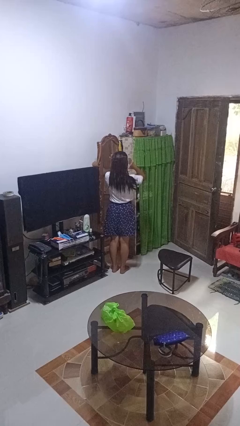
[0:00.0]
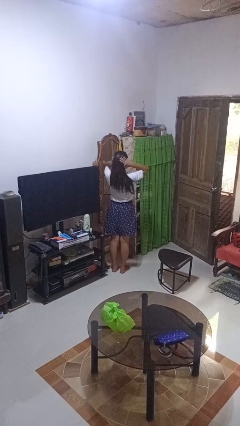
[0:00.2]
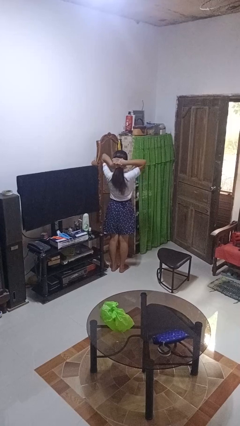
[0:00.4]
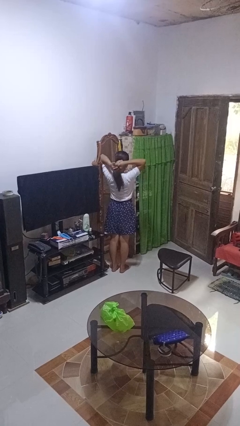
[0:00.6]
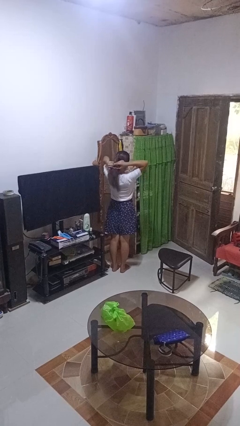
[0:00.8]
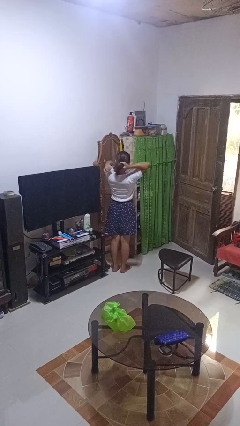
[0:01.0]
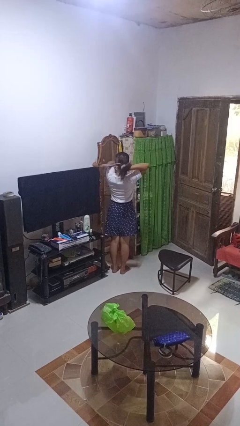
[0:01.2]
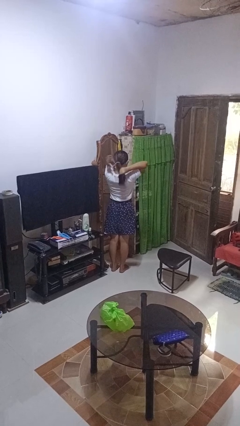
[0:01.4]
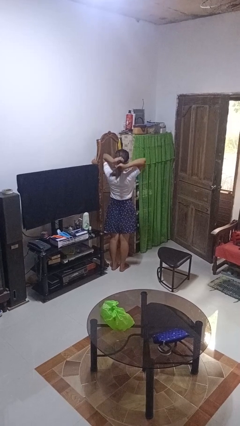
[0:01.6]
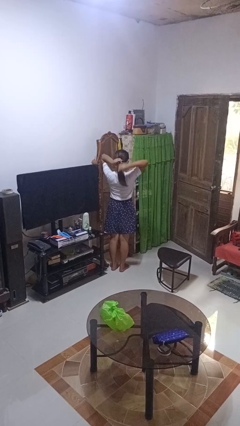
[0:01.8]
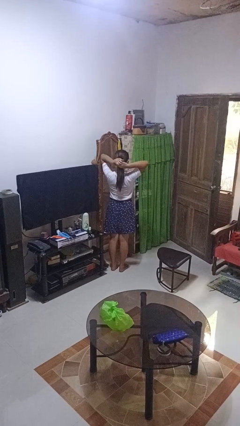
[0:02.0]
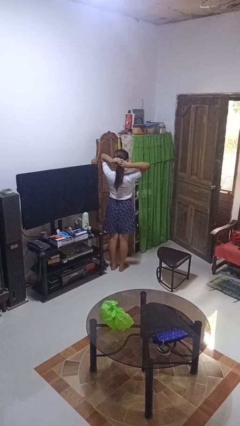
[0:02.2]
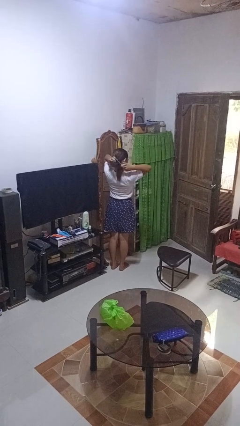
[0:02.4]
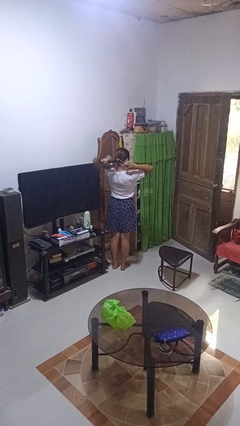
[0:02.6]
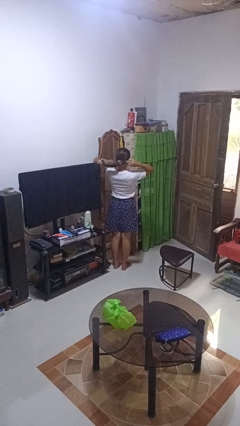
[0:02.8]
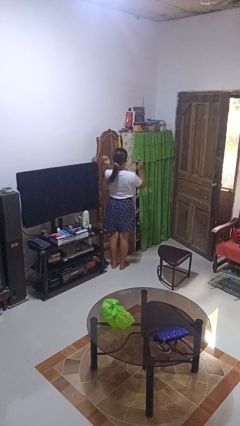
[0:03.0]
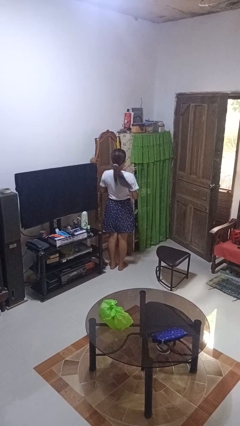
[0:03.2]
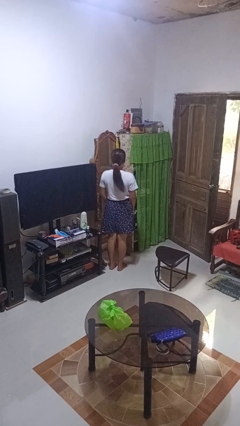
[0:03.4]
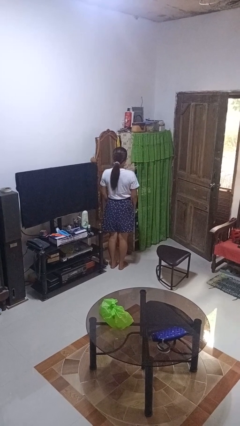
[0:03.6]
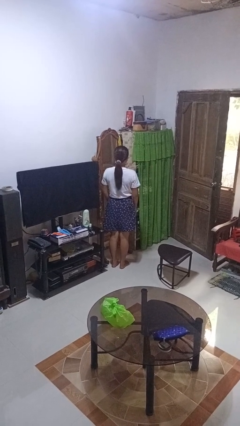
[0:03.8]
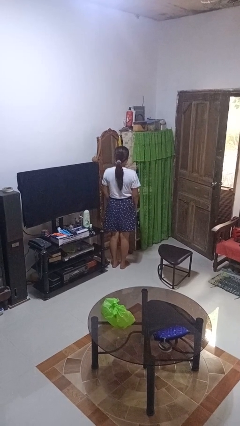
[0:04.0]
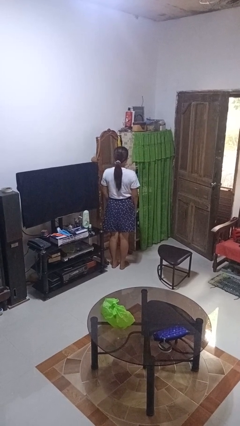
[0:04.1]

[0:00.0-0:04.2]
person puts hair in ponytail

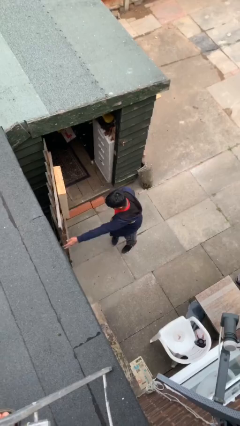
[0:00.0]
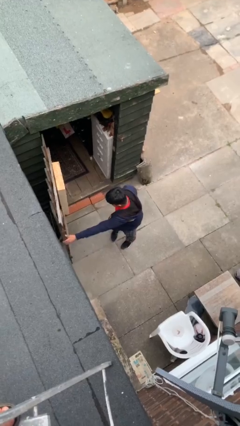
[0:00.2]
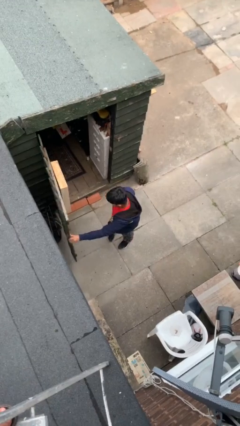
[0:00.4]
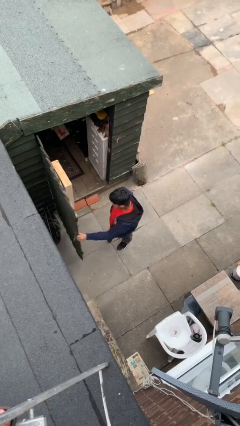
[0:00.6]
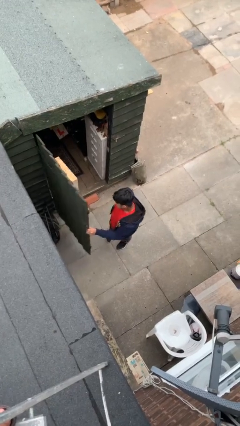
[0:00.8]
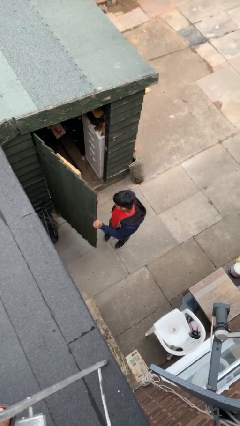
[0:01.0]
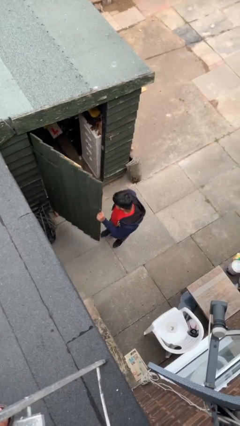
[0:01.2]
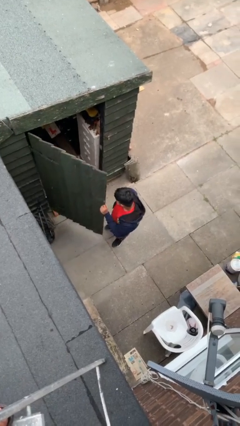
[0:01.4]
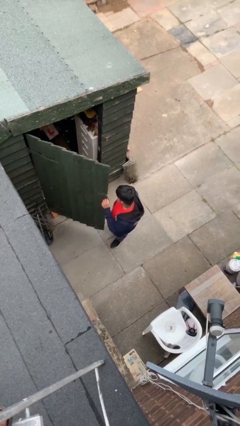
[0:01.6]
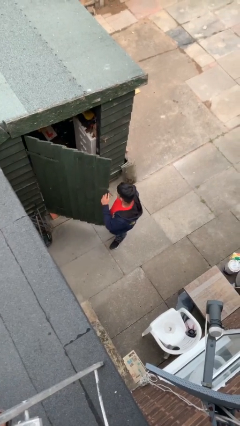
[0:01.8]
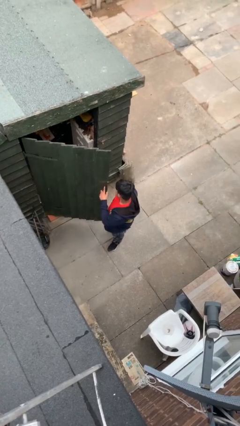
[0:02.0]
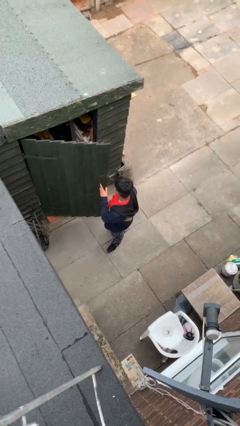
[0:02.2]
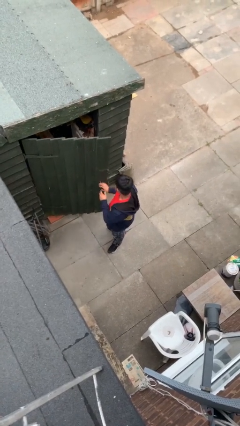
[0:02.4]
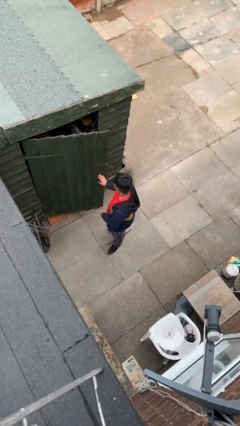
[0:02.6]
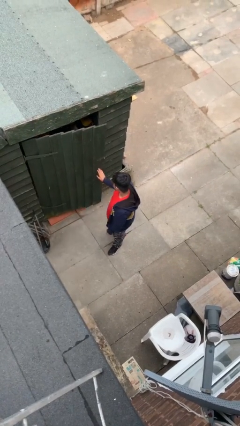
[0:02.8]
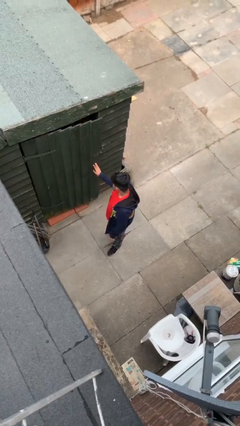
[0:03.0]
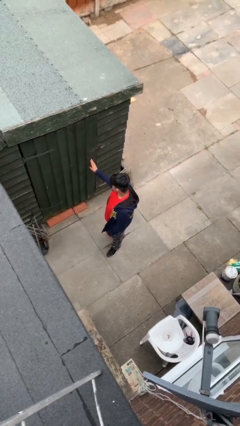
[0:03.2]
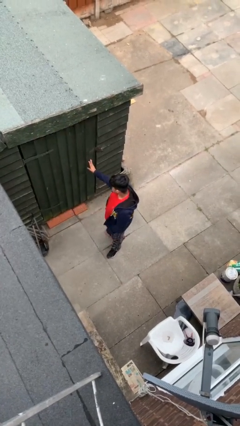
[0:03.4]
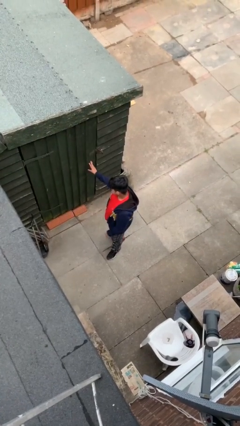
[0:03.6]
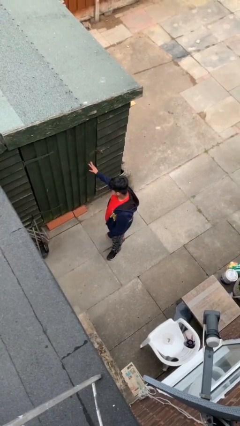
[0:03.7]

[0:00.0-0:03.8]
person closes facility door

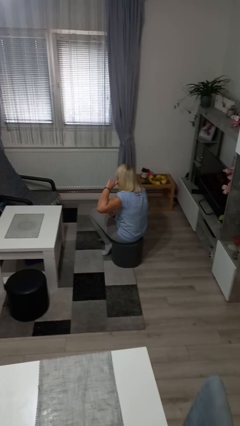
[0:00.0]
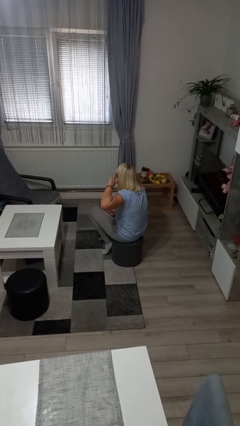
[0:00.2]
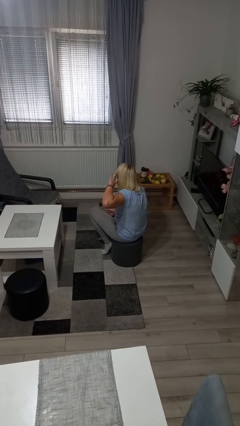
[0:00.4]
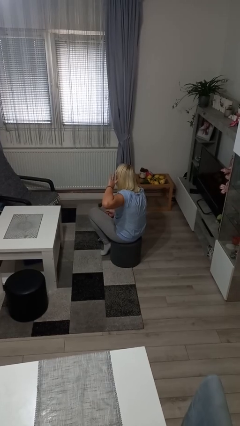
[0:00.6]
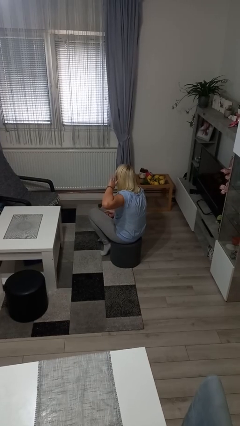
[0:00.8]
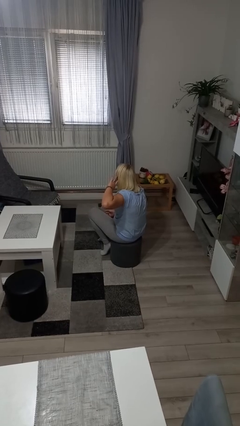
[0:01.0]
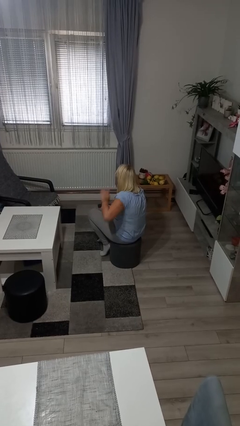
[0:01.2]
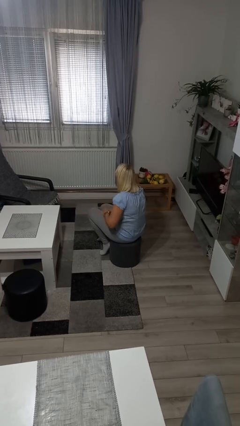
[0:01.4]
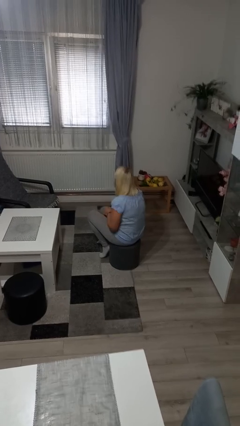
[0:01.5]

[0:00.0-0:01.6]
person touches earlobe

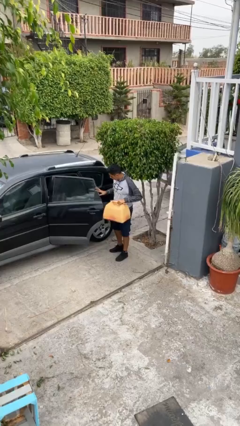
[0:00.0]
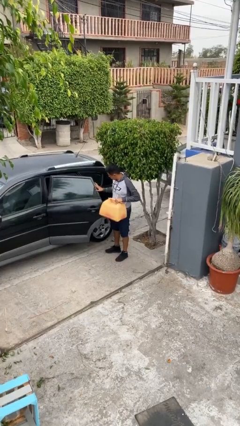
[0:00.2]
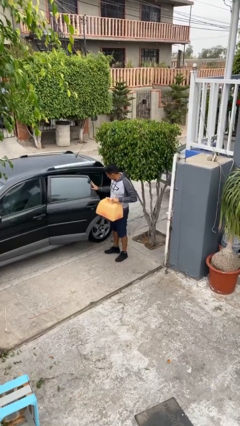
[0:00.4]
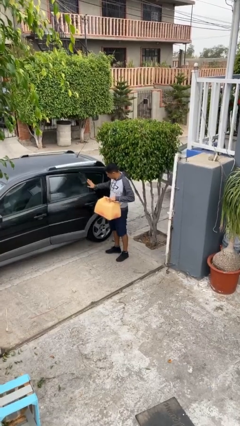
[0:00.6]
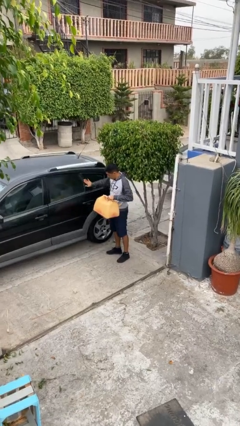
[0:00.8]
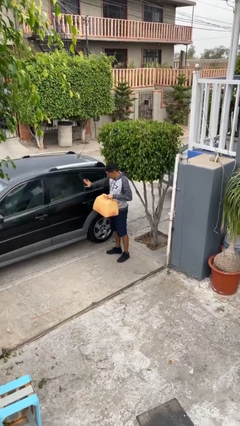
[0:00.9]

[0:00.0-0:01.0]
person closes car door

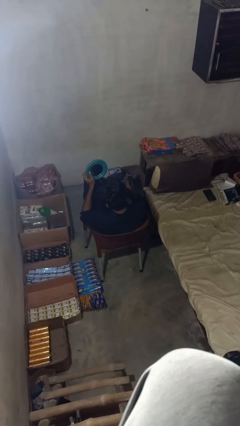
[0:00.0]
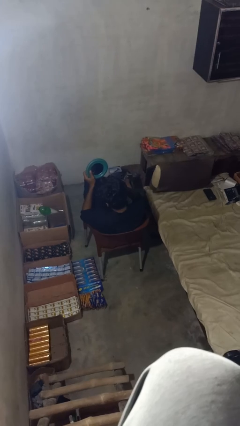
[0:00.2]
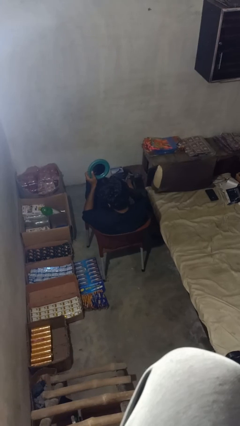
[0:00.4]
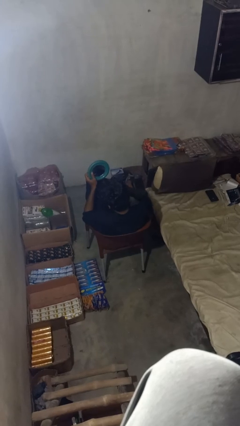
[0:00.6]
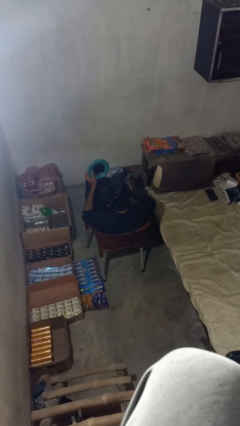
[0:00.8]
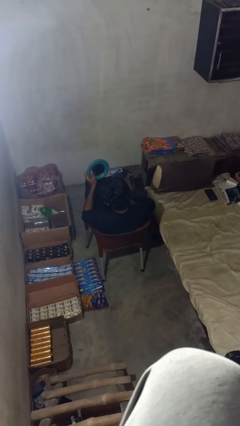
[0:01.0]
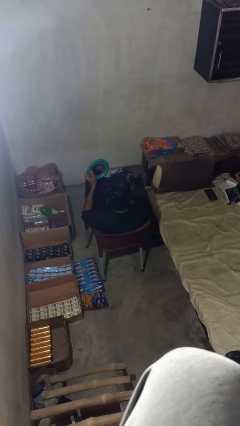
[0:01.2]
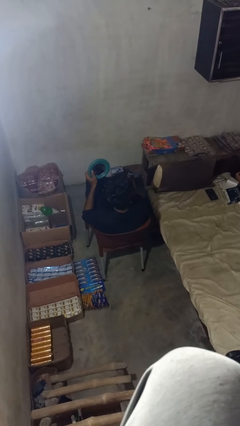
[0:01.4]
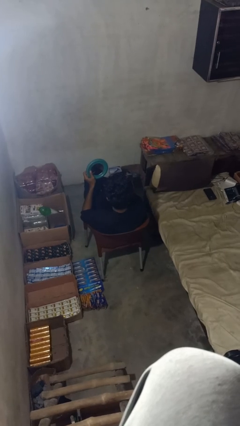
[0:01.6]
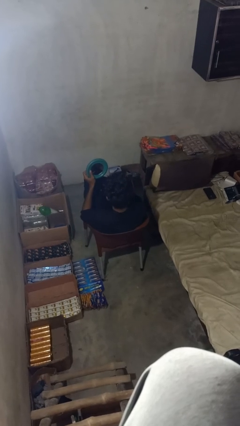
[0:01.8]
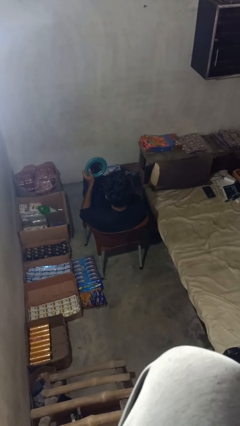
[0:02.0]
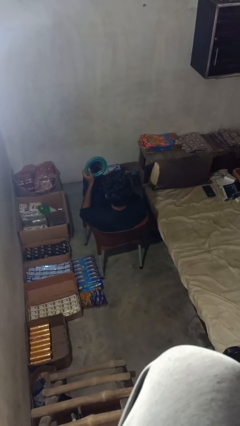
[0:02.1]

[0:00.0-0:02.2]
person applies eye makeup

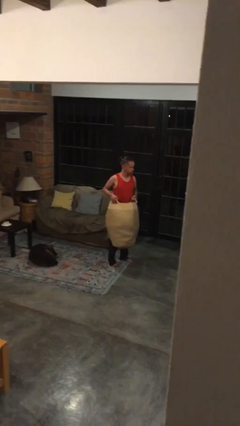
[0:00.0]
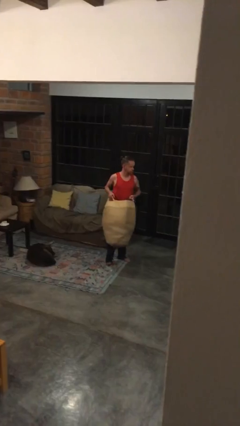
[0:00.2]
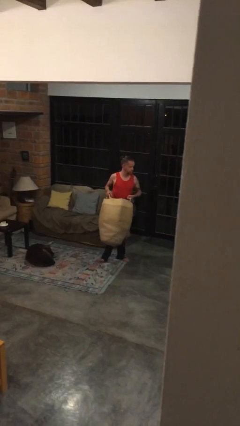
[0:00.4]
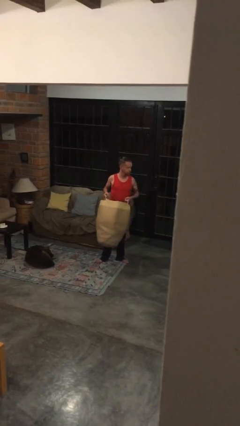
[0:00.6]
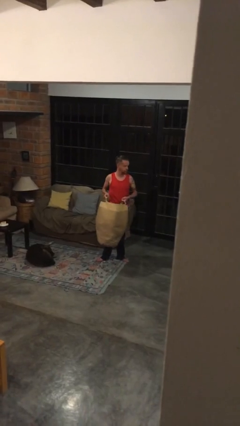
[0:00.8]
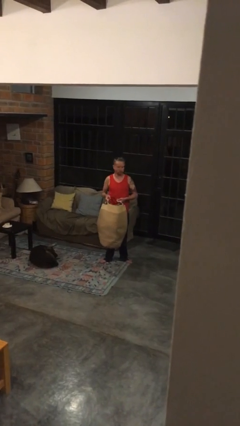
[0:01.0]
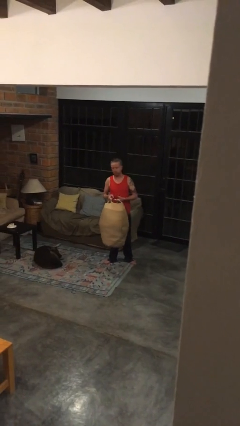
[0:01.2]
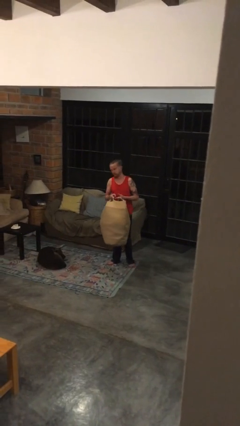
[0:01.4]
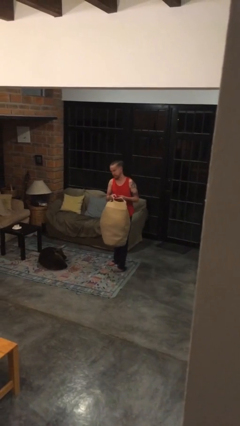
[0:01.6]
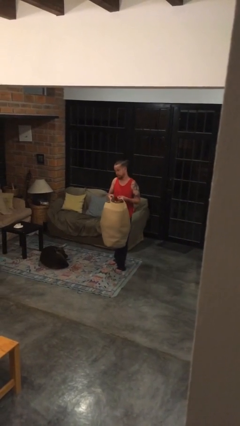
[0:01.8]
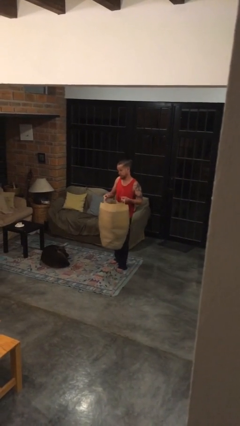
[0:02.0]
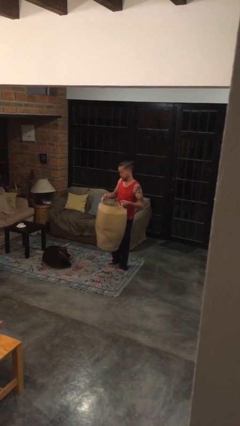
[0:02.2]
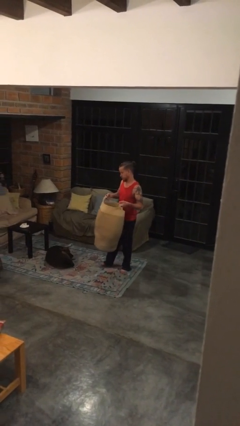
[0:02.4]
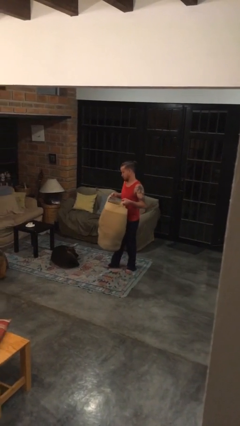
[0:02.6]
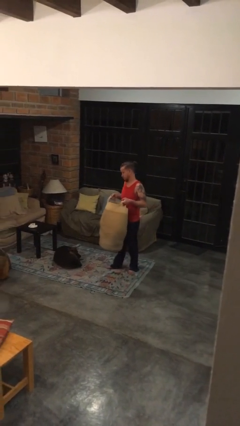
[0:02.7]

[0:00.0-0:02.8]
person carries laundry basket

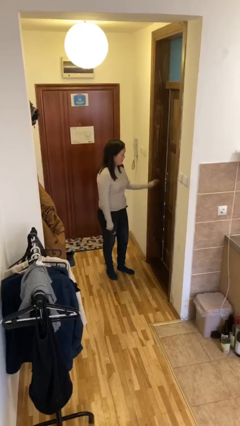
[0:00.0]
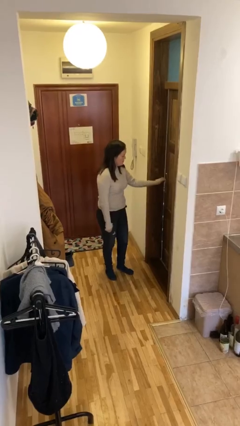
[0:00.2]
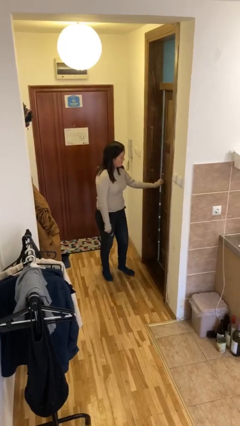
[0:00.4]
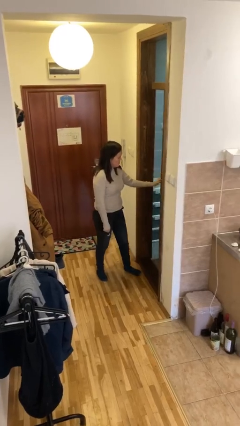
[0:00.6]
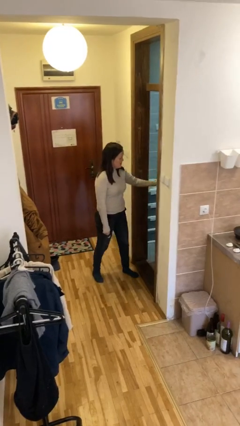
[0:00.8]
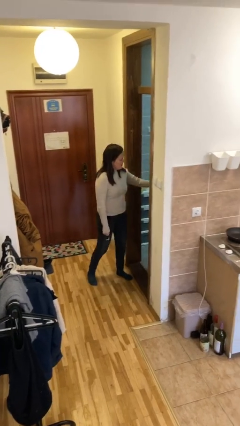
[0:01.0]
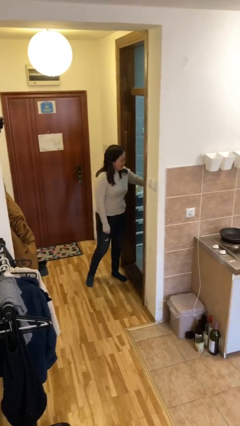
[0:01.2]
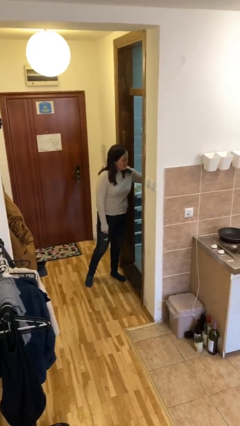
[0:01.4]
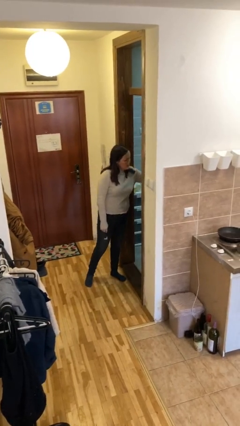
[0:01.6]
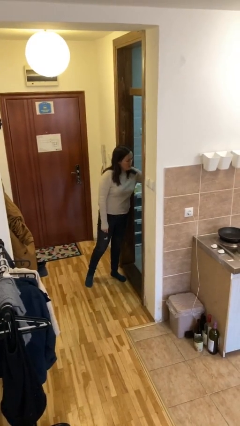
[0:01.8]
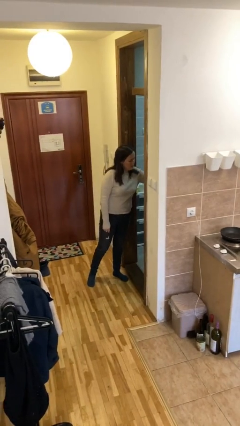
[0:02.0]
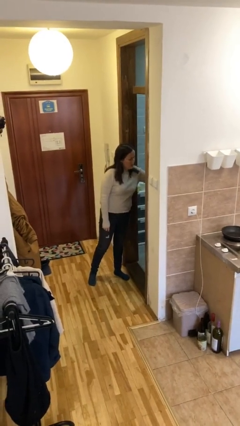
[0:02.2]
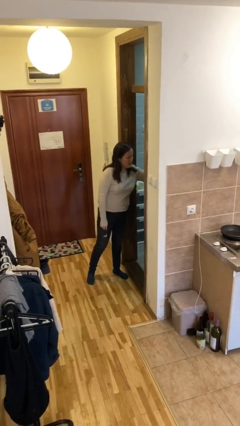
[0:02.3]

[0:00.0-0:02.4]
person opens facility door
